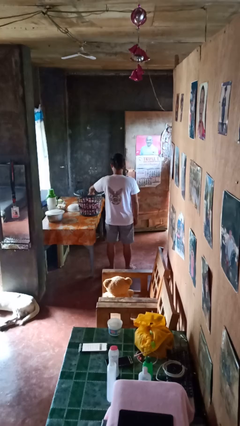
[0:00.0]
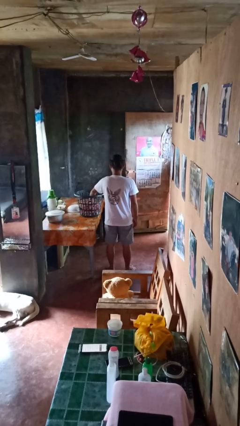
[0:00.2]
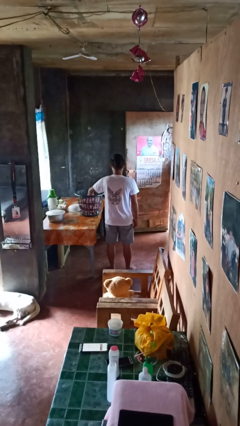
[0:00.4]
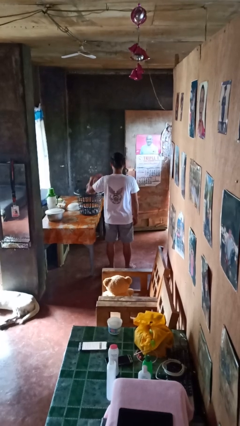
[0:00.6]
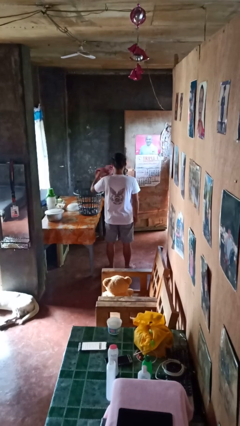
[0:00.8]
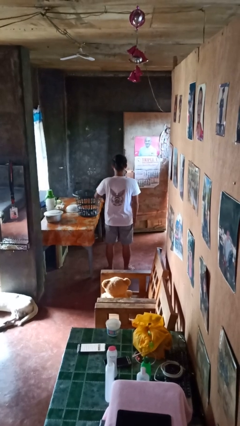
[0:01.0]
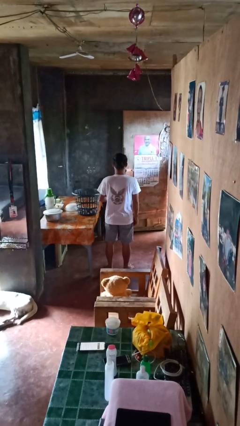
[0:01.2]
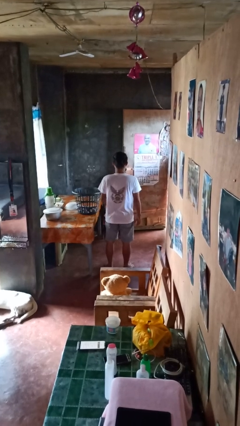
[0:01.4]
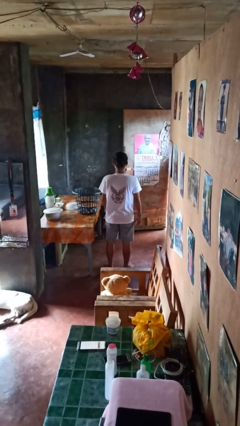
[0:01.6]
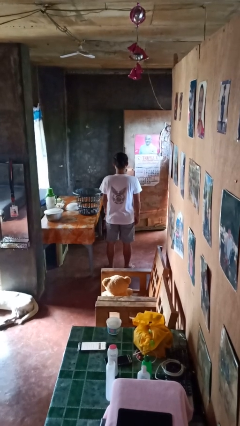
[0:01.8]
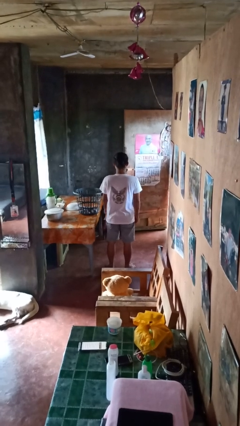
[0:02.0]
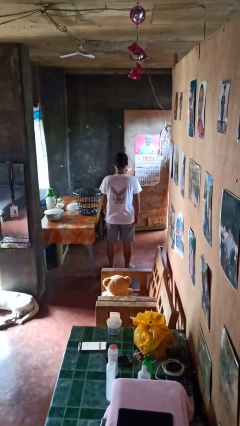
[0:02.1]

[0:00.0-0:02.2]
person takes object from basket

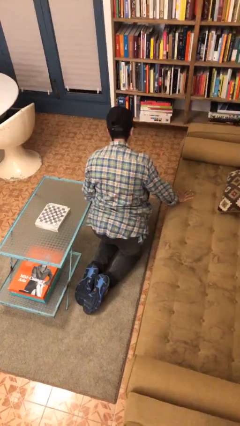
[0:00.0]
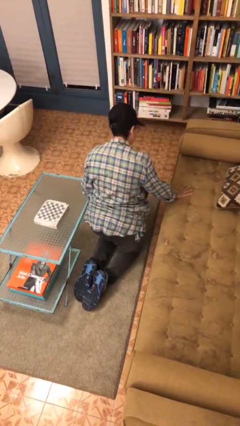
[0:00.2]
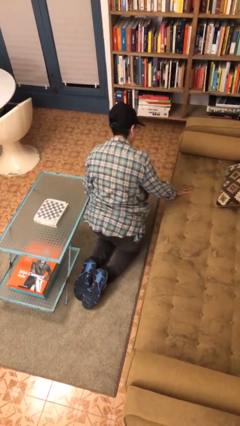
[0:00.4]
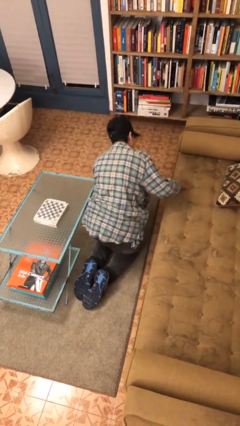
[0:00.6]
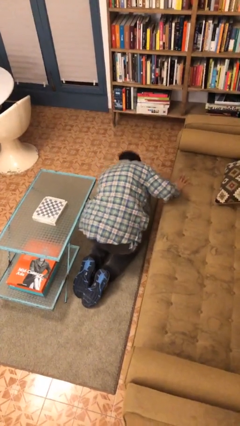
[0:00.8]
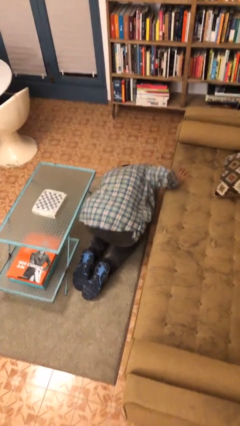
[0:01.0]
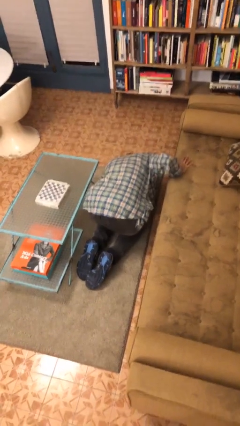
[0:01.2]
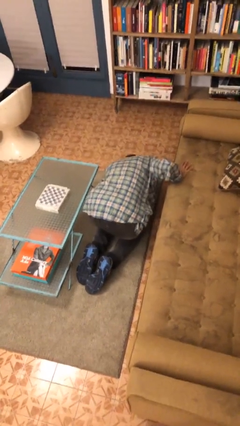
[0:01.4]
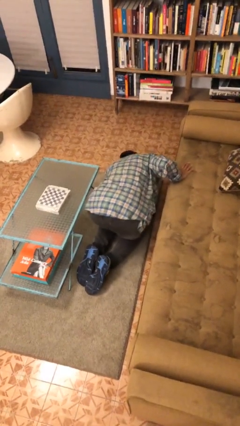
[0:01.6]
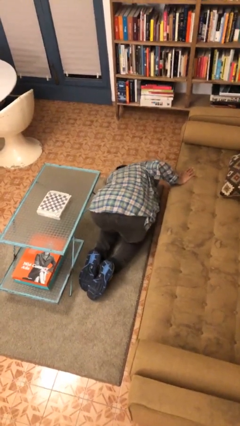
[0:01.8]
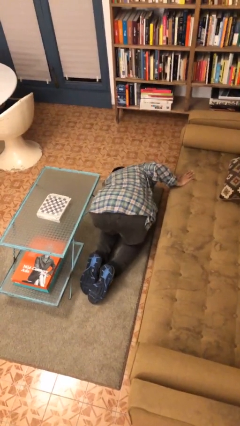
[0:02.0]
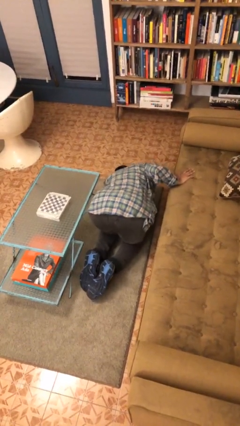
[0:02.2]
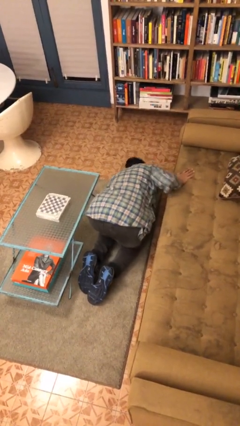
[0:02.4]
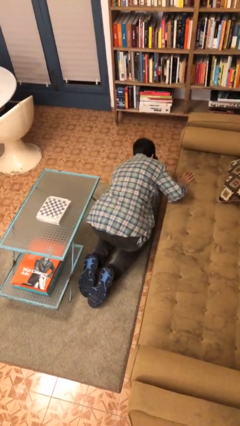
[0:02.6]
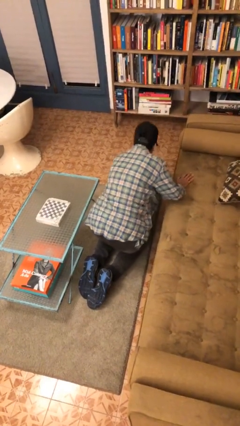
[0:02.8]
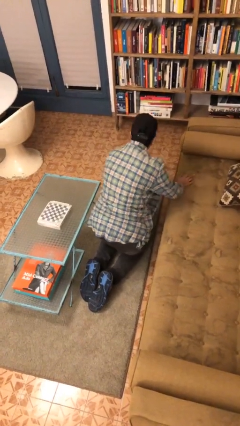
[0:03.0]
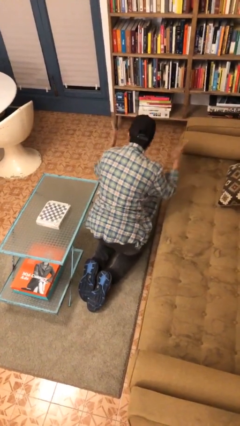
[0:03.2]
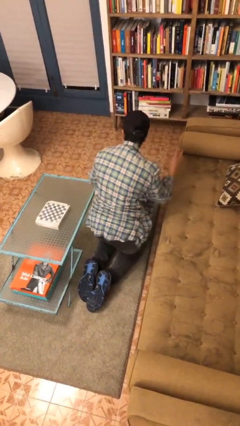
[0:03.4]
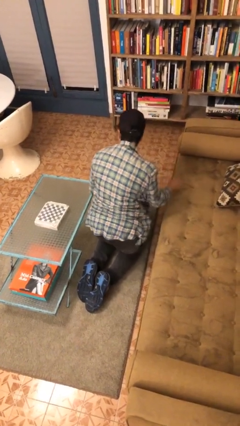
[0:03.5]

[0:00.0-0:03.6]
person searches under couch

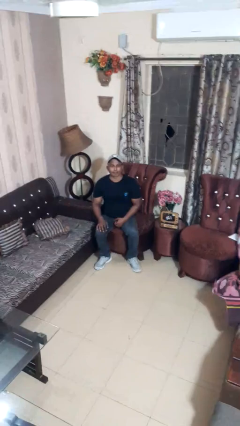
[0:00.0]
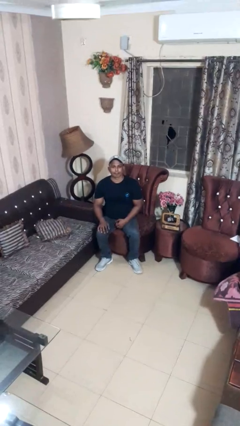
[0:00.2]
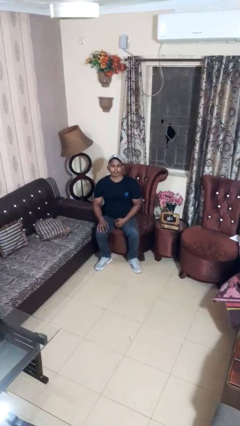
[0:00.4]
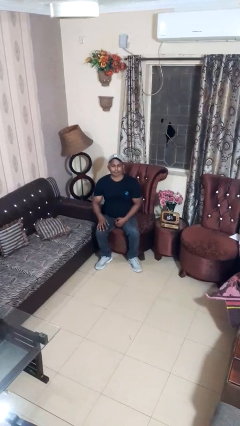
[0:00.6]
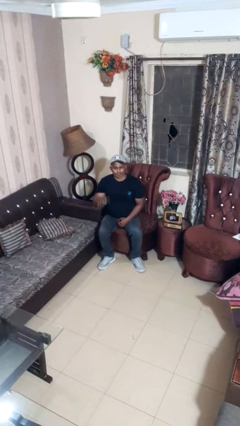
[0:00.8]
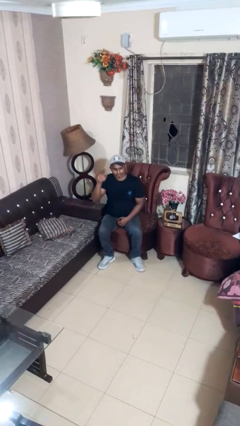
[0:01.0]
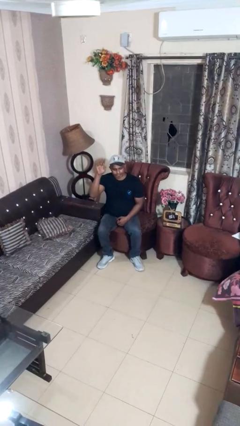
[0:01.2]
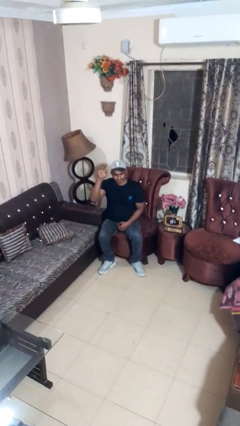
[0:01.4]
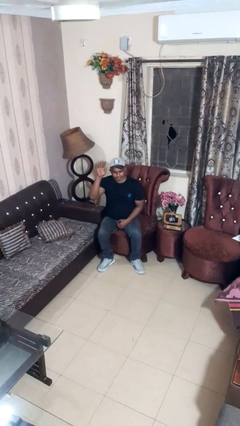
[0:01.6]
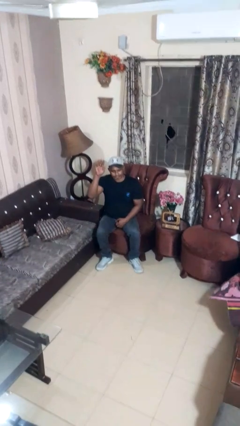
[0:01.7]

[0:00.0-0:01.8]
person gestures raise hand

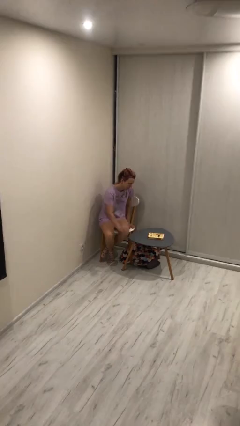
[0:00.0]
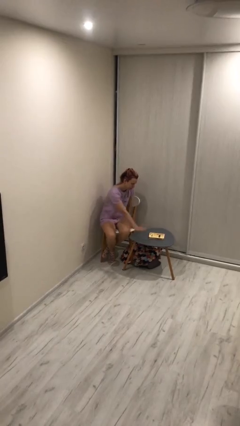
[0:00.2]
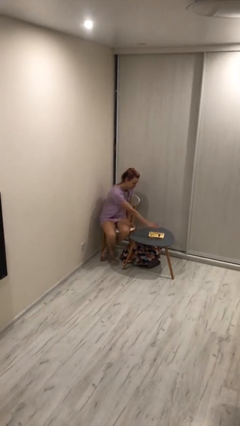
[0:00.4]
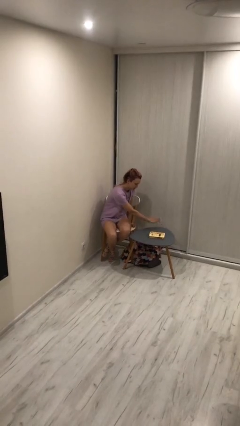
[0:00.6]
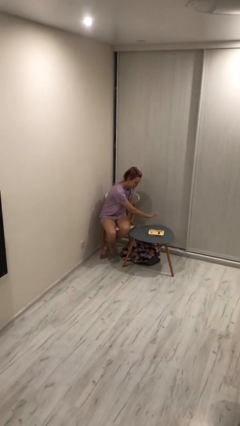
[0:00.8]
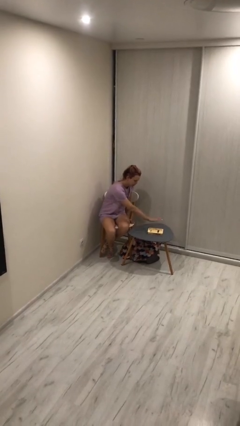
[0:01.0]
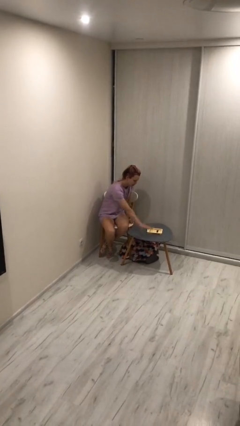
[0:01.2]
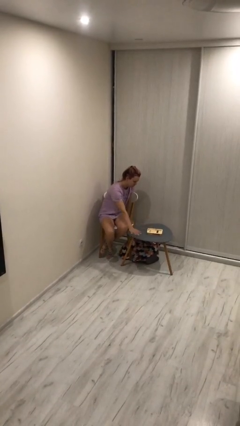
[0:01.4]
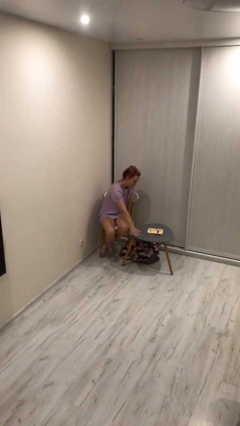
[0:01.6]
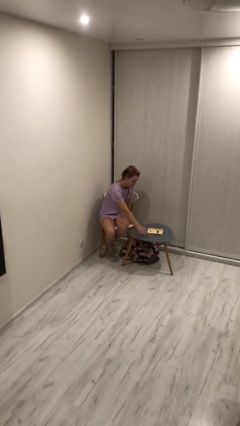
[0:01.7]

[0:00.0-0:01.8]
person waves hand over object

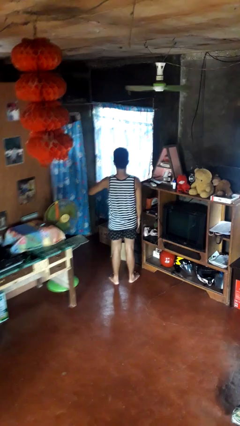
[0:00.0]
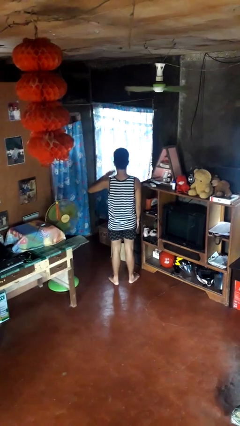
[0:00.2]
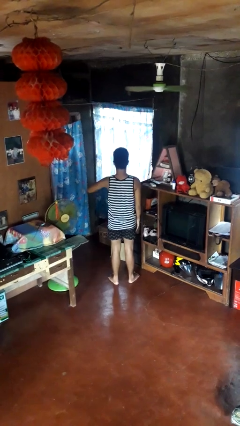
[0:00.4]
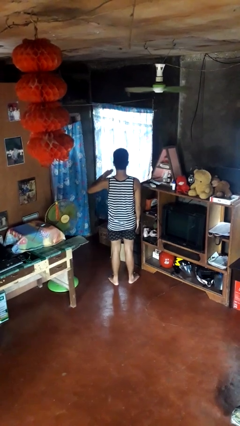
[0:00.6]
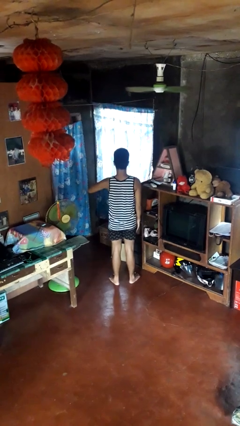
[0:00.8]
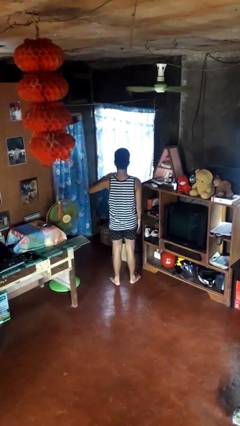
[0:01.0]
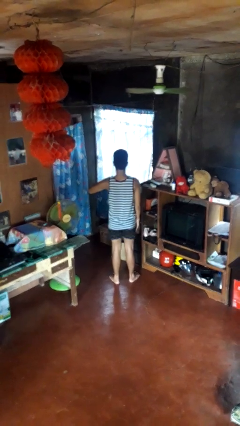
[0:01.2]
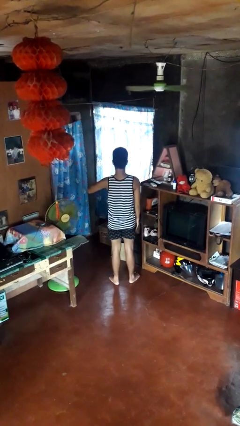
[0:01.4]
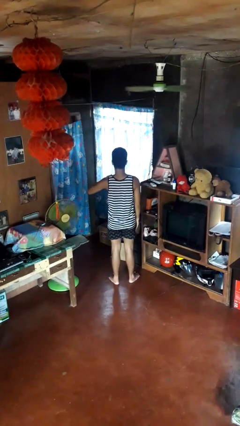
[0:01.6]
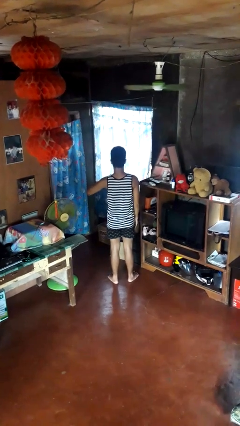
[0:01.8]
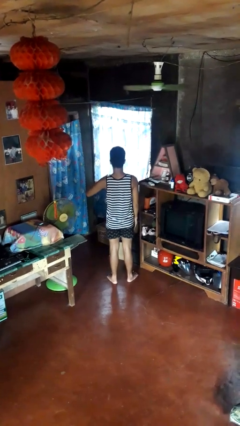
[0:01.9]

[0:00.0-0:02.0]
person drums on chest

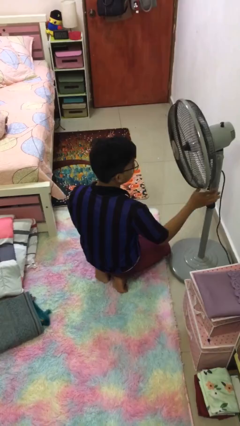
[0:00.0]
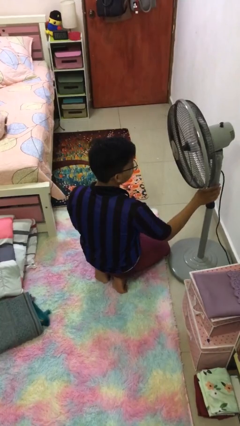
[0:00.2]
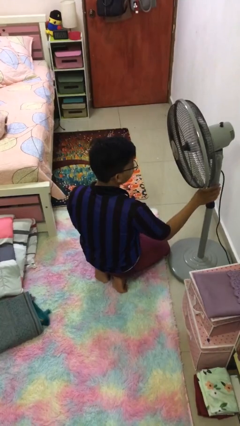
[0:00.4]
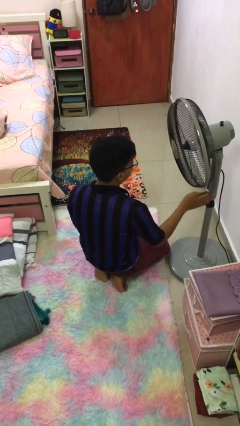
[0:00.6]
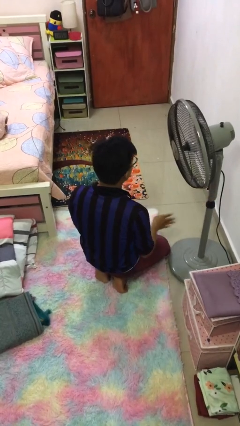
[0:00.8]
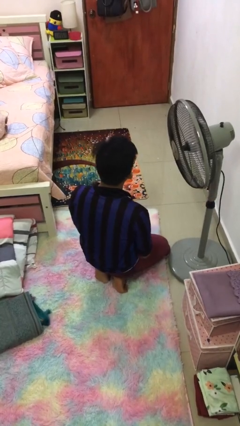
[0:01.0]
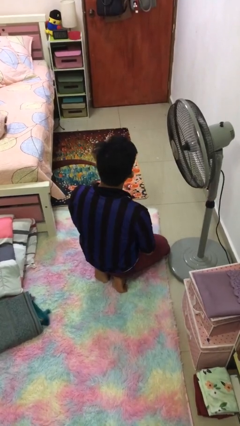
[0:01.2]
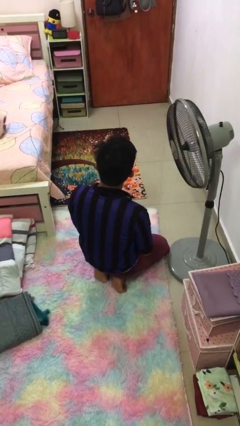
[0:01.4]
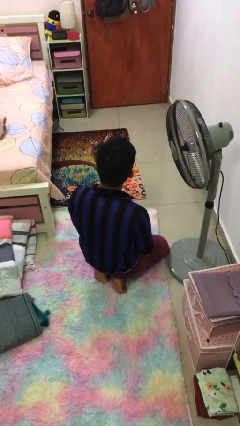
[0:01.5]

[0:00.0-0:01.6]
person turns on fan

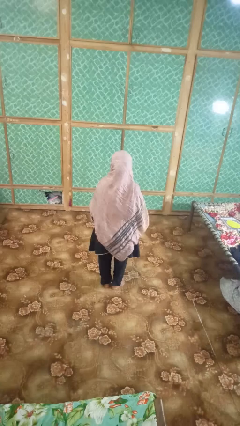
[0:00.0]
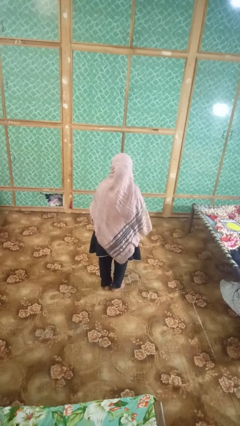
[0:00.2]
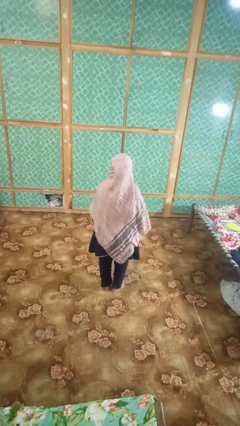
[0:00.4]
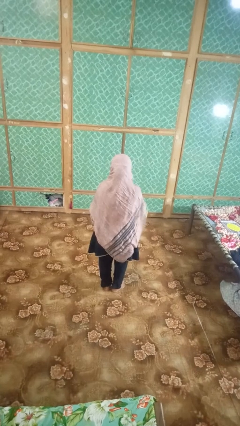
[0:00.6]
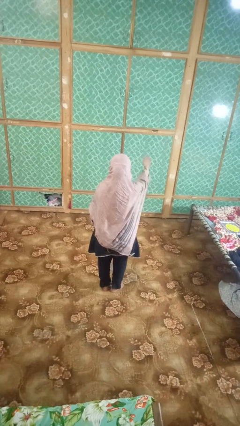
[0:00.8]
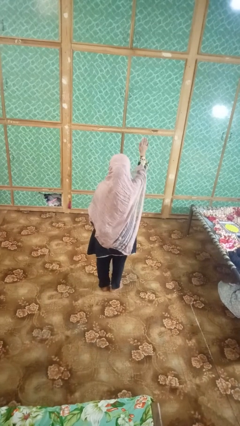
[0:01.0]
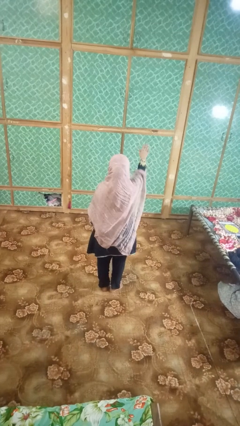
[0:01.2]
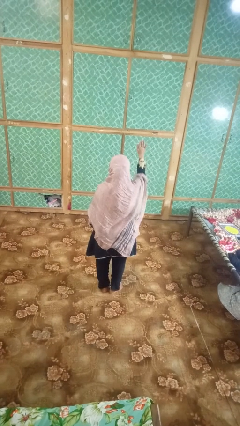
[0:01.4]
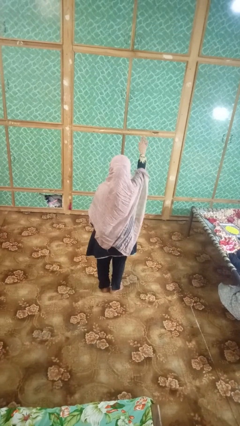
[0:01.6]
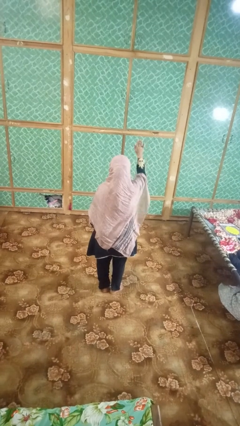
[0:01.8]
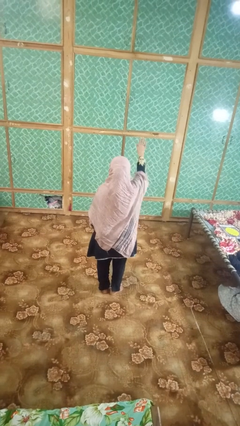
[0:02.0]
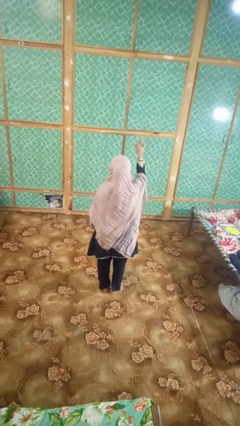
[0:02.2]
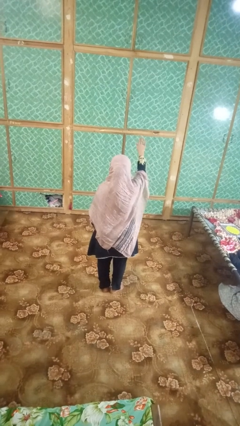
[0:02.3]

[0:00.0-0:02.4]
person gestures stop

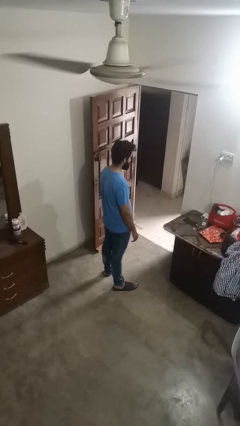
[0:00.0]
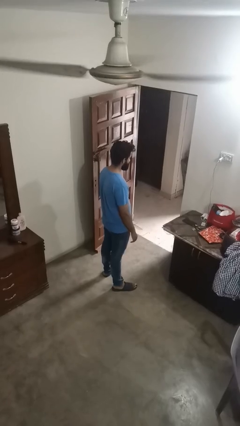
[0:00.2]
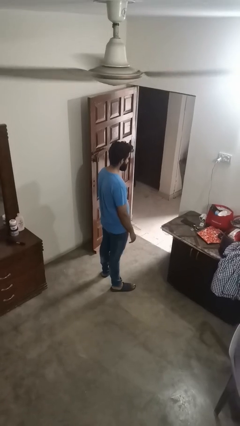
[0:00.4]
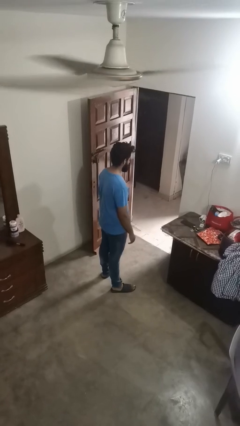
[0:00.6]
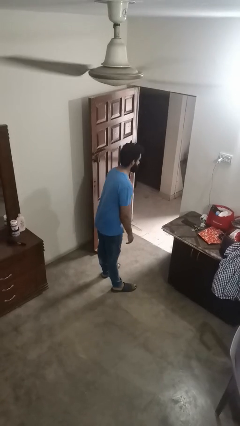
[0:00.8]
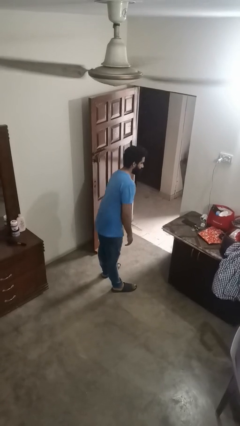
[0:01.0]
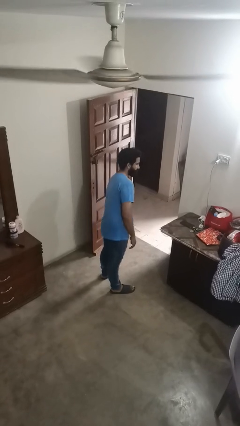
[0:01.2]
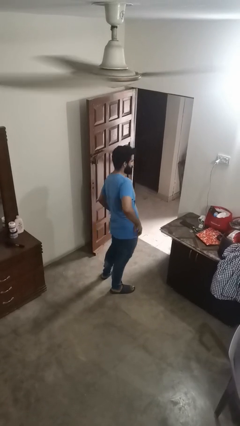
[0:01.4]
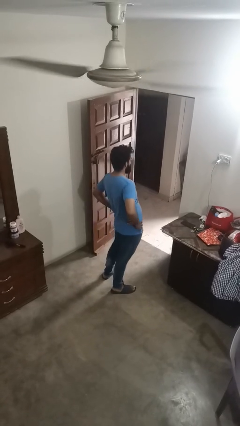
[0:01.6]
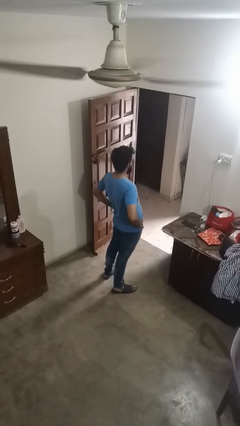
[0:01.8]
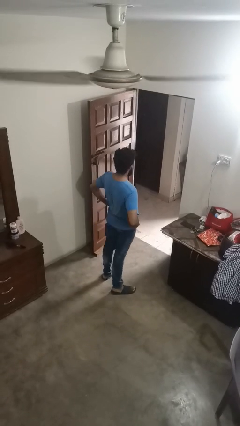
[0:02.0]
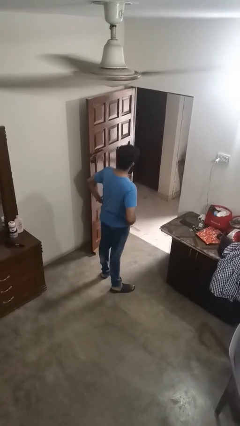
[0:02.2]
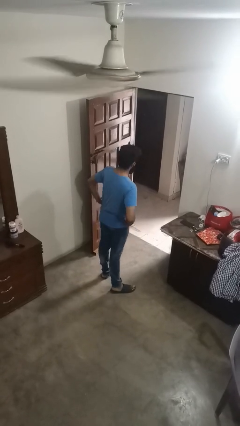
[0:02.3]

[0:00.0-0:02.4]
person wiggles hips
